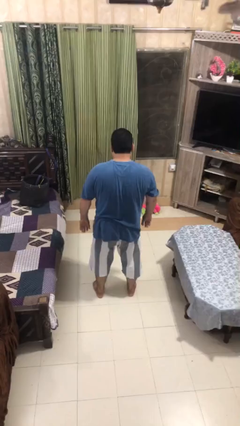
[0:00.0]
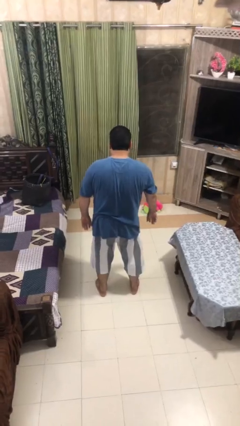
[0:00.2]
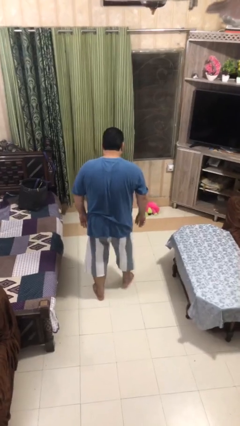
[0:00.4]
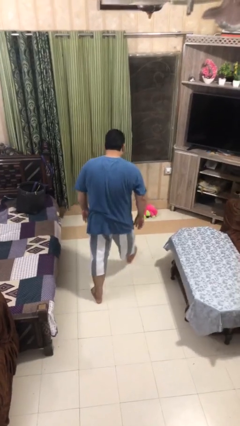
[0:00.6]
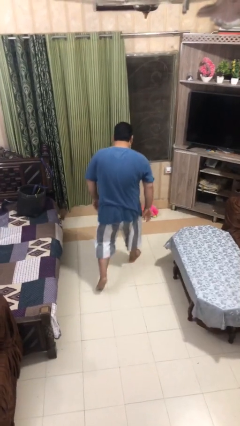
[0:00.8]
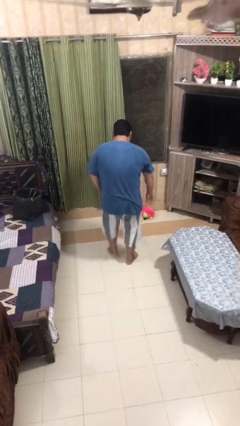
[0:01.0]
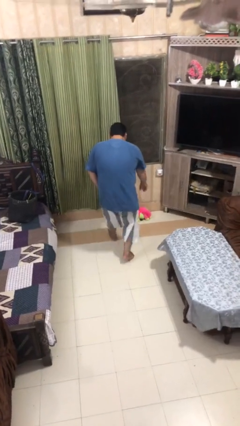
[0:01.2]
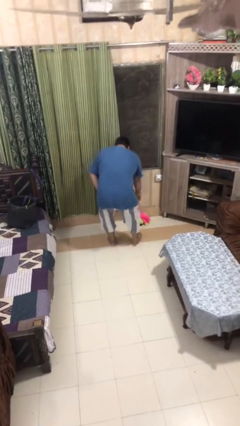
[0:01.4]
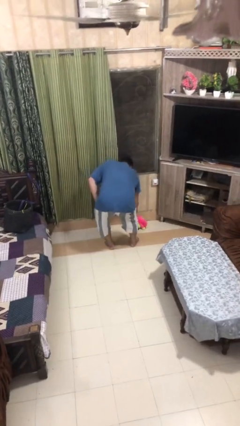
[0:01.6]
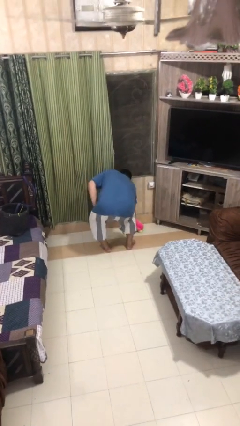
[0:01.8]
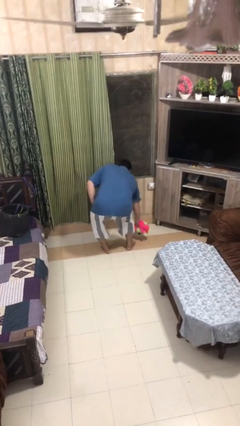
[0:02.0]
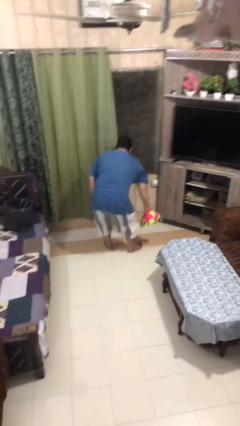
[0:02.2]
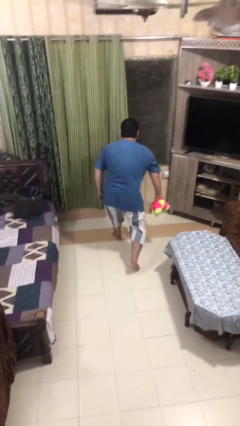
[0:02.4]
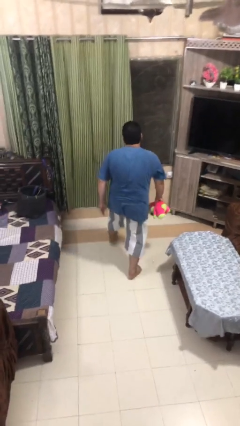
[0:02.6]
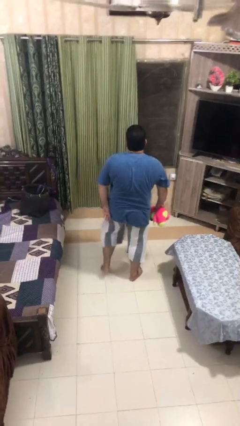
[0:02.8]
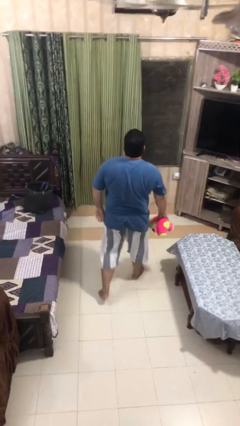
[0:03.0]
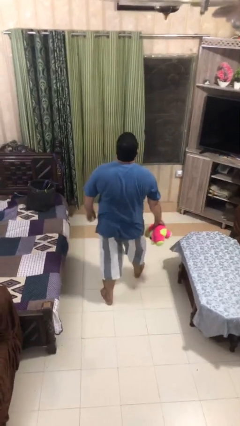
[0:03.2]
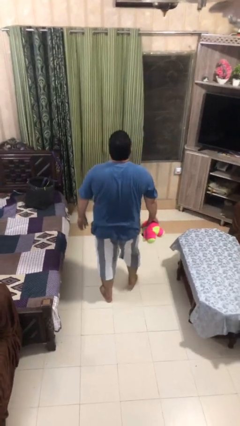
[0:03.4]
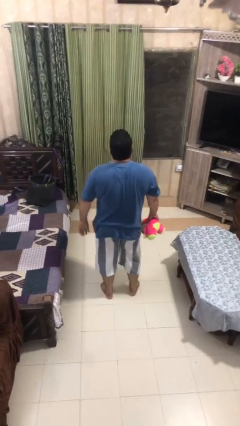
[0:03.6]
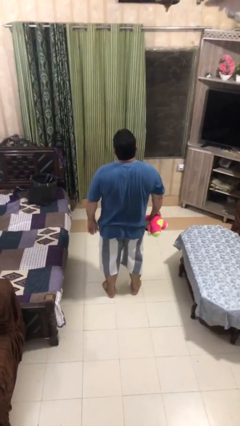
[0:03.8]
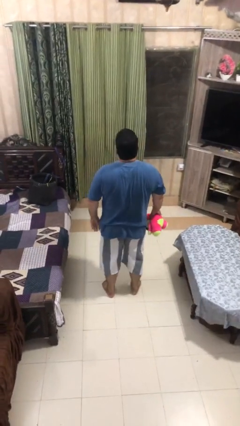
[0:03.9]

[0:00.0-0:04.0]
person picks up object from floor

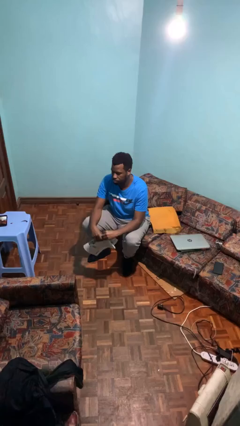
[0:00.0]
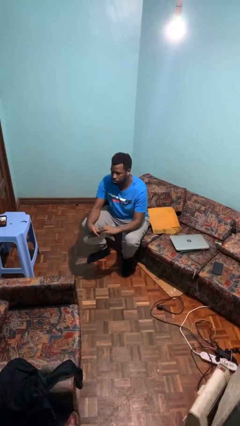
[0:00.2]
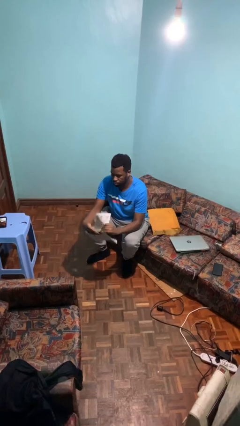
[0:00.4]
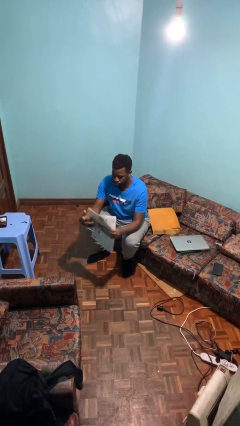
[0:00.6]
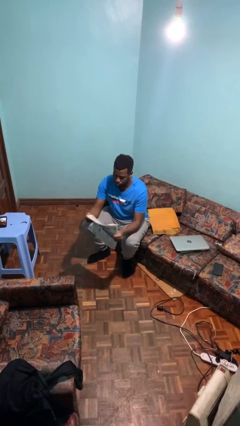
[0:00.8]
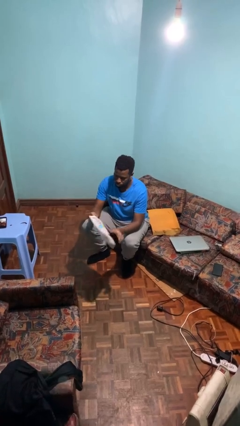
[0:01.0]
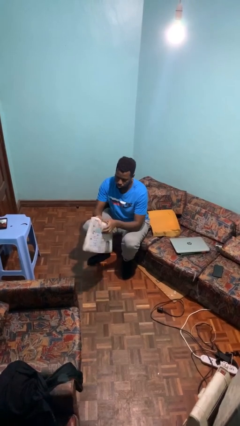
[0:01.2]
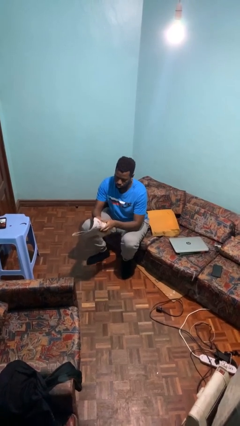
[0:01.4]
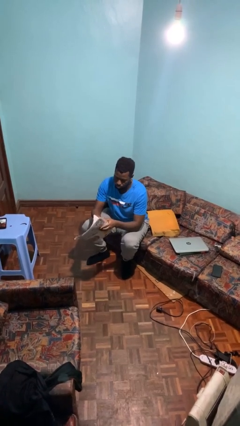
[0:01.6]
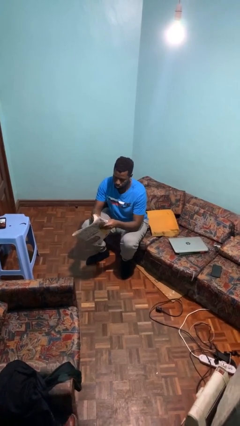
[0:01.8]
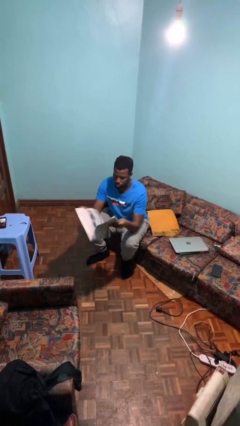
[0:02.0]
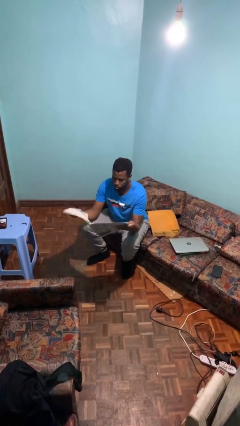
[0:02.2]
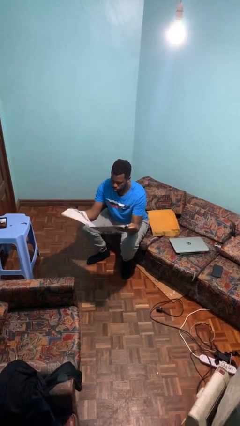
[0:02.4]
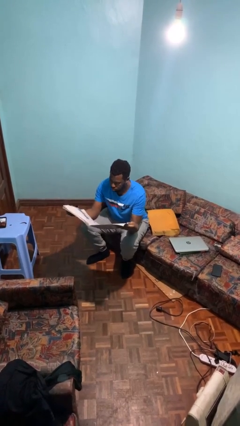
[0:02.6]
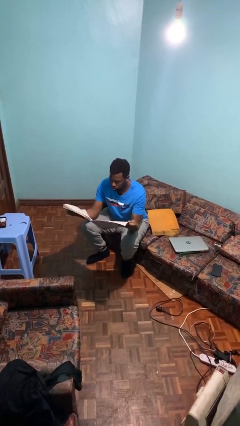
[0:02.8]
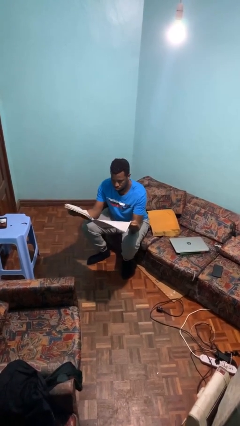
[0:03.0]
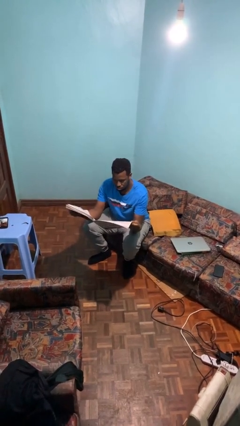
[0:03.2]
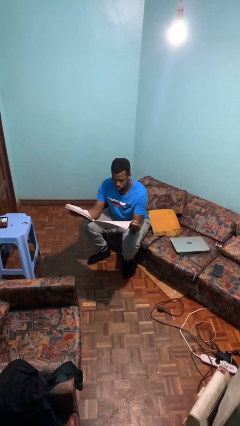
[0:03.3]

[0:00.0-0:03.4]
person reads newspaper

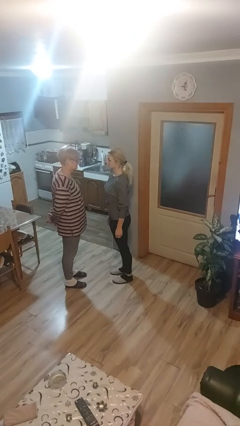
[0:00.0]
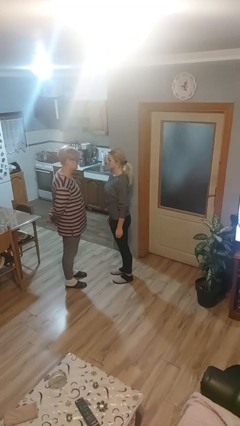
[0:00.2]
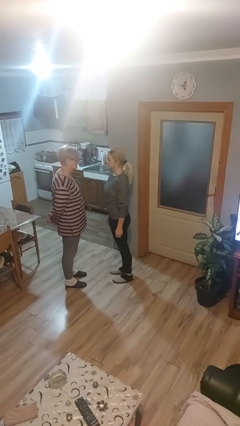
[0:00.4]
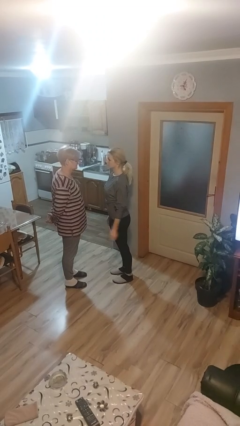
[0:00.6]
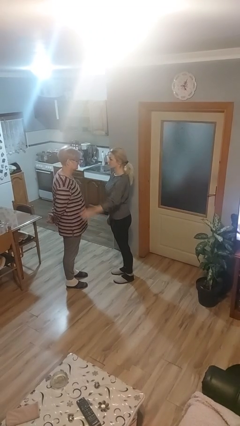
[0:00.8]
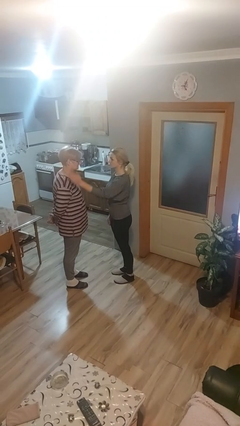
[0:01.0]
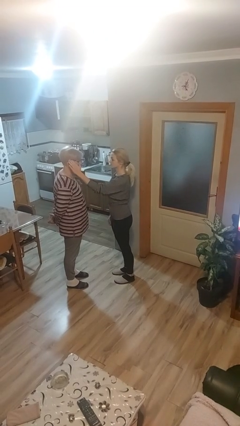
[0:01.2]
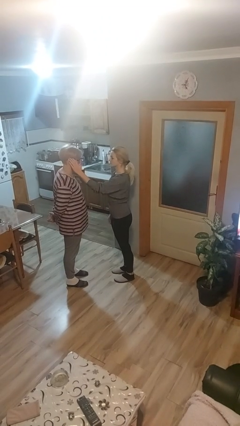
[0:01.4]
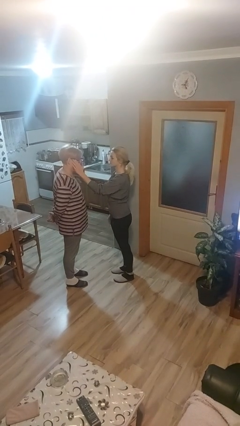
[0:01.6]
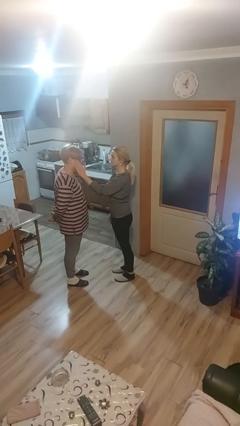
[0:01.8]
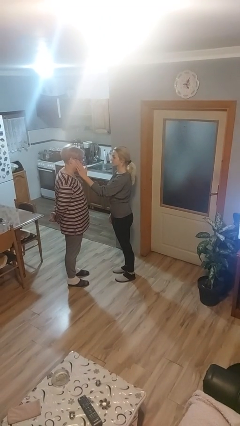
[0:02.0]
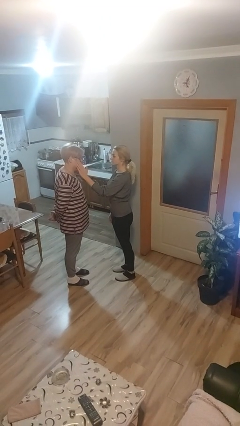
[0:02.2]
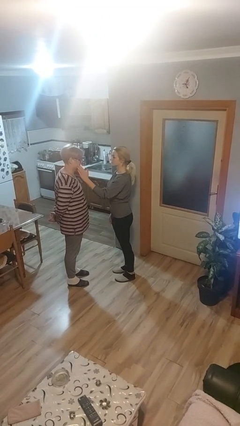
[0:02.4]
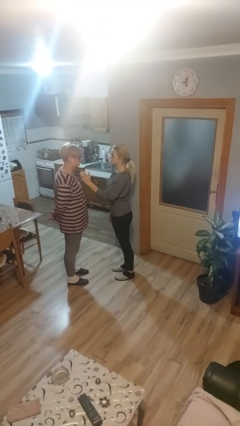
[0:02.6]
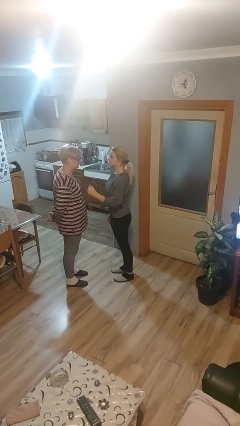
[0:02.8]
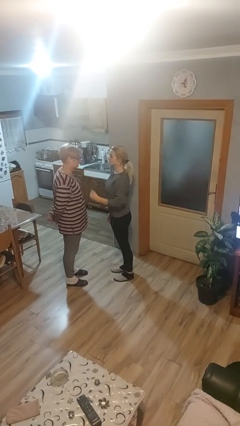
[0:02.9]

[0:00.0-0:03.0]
person touches face of person

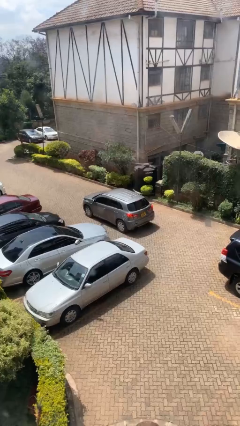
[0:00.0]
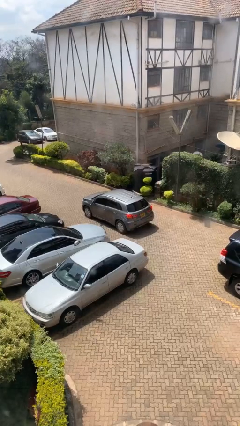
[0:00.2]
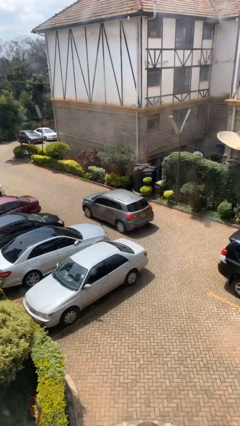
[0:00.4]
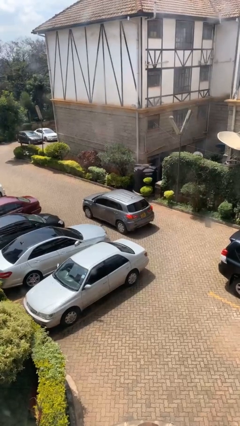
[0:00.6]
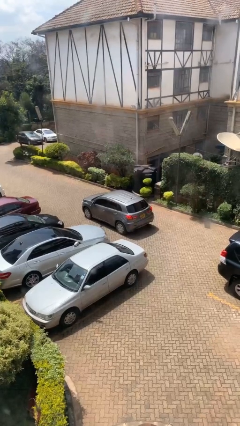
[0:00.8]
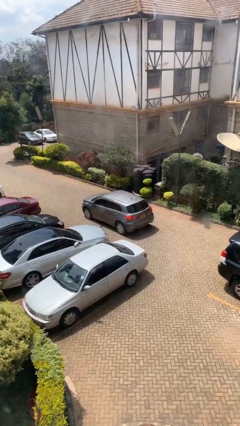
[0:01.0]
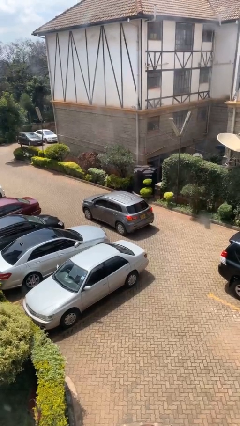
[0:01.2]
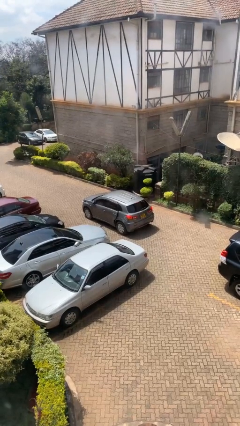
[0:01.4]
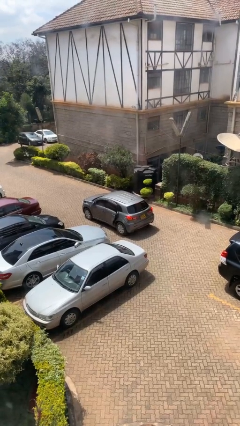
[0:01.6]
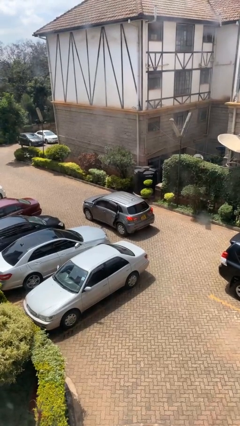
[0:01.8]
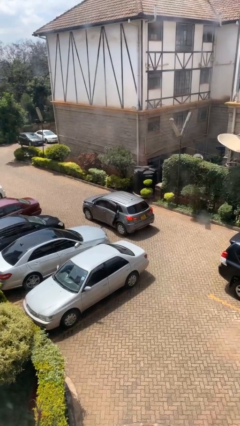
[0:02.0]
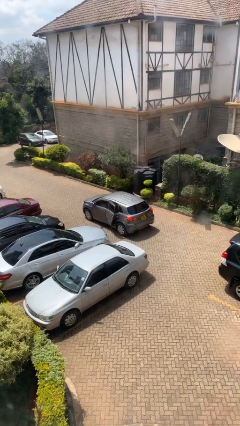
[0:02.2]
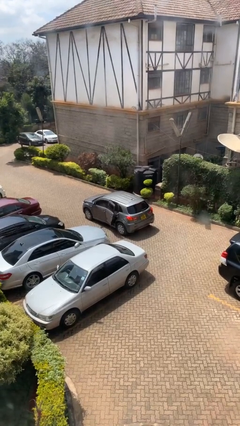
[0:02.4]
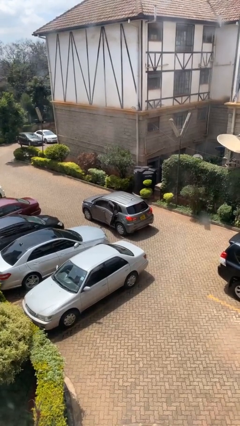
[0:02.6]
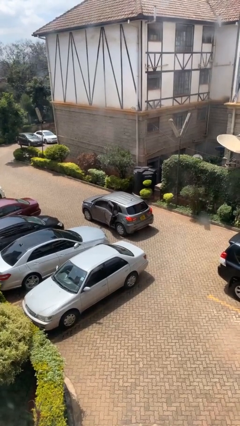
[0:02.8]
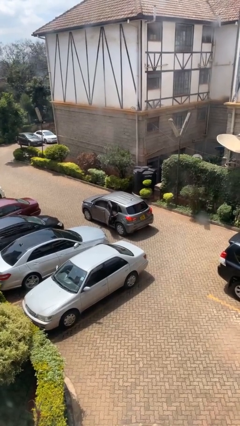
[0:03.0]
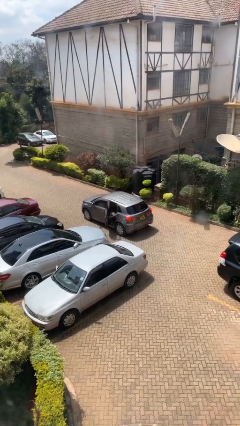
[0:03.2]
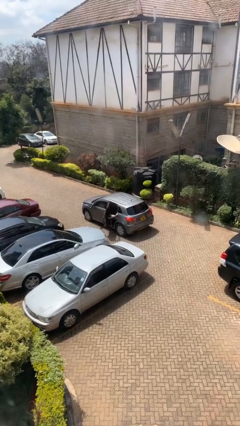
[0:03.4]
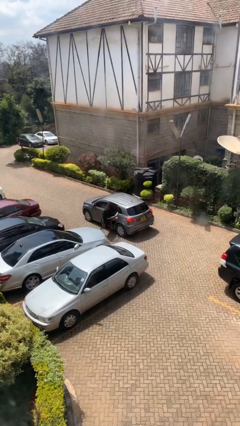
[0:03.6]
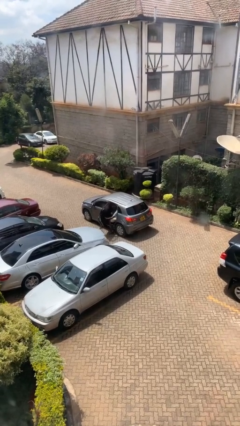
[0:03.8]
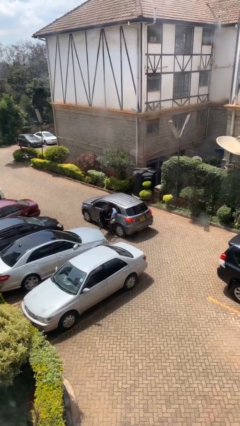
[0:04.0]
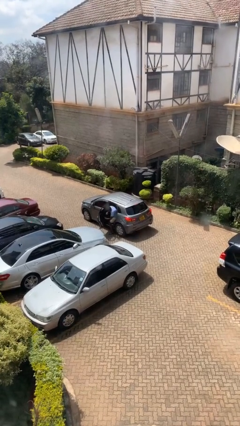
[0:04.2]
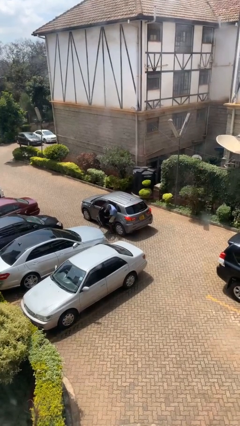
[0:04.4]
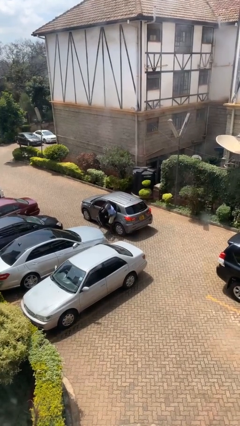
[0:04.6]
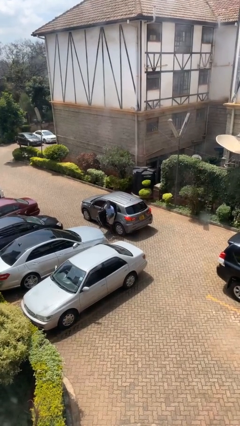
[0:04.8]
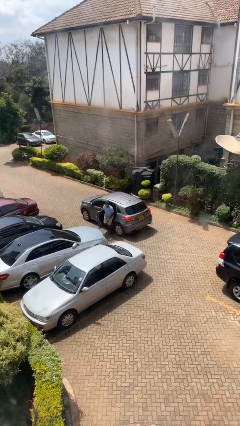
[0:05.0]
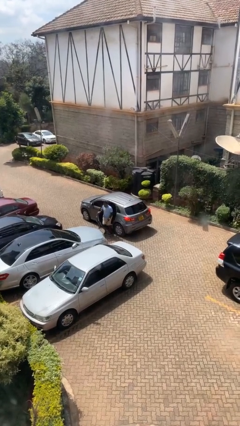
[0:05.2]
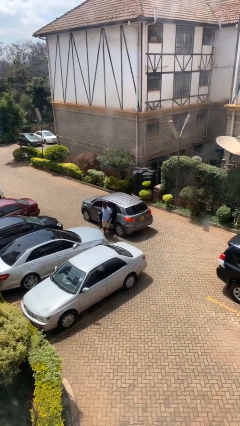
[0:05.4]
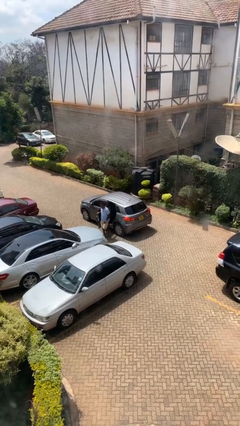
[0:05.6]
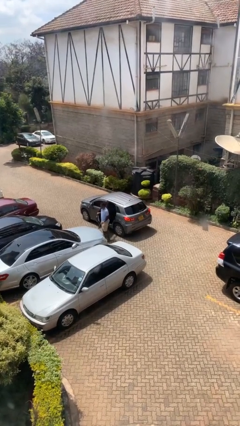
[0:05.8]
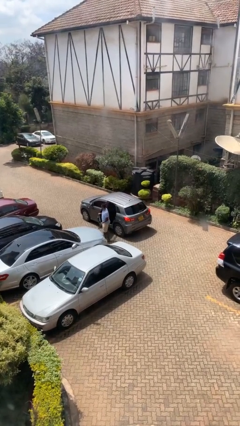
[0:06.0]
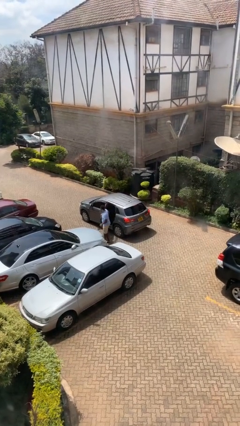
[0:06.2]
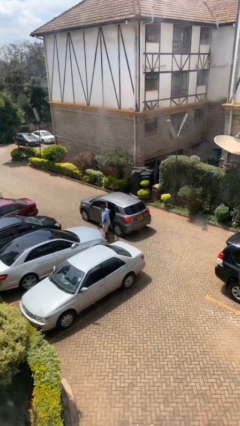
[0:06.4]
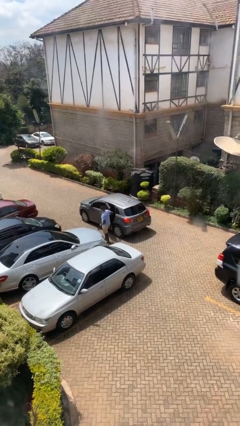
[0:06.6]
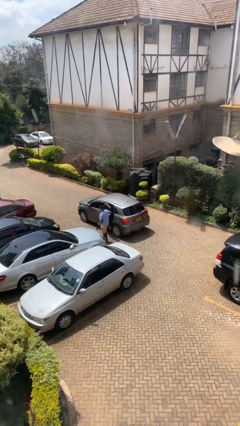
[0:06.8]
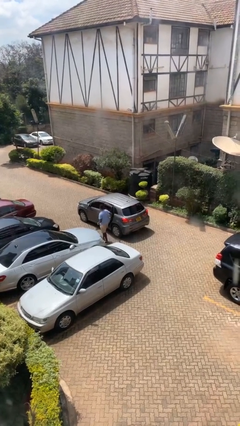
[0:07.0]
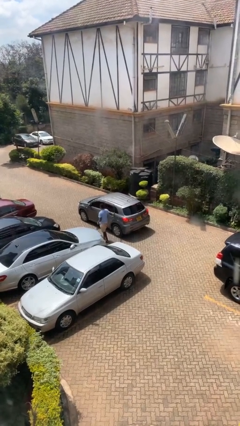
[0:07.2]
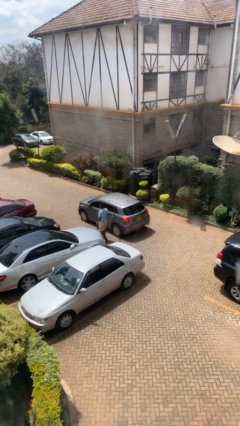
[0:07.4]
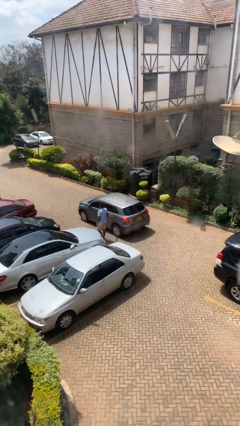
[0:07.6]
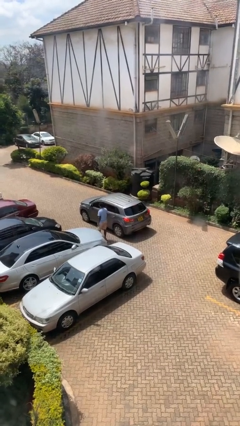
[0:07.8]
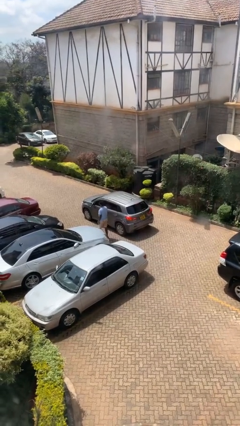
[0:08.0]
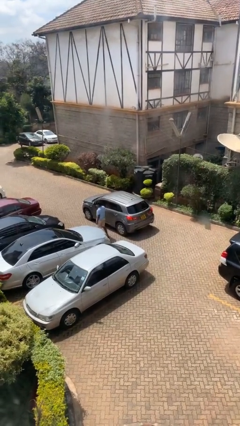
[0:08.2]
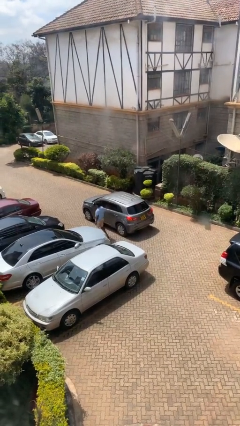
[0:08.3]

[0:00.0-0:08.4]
car drops off person
